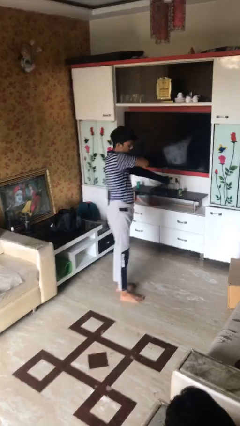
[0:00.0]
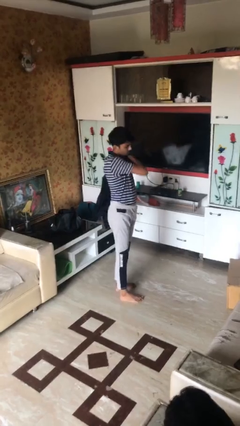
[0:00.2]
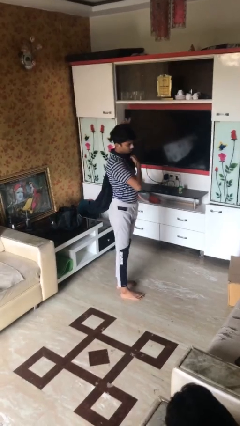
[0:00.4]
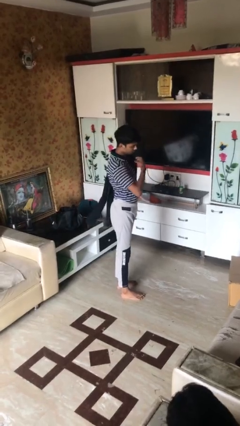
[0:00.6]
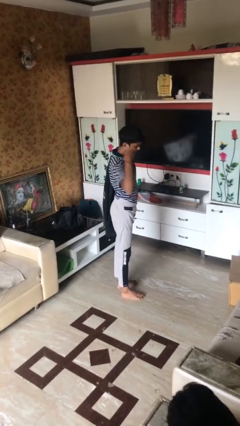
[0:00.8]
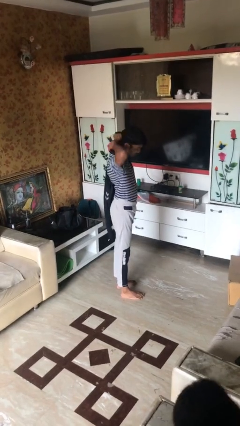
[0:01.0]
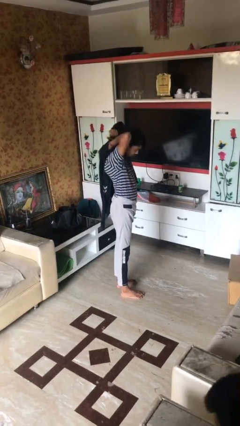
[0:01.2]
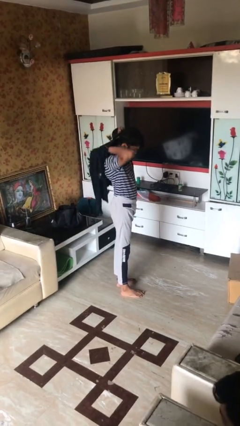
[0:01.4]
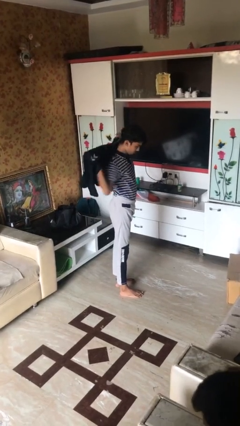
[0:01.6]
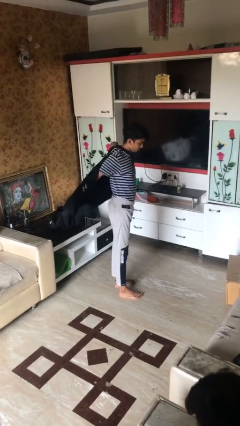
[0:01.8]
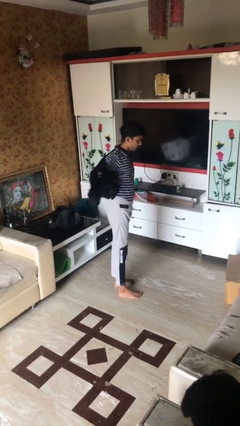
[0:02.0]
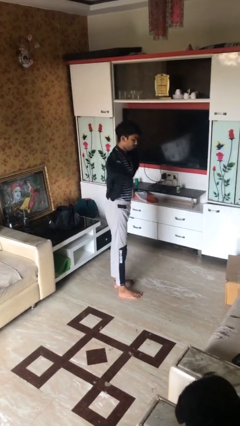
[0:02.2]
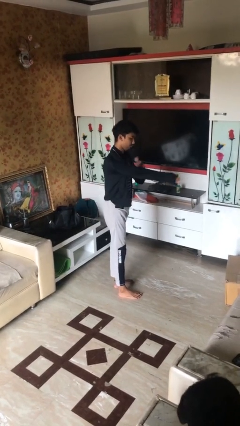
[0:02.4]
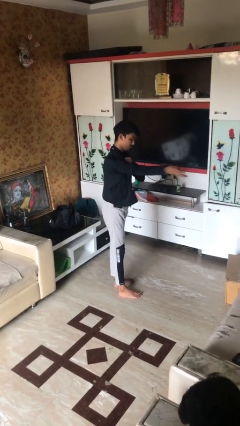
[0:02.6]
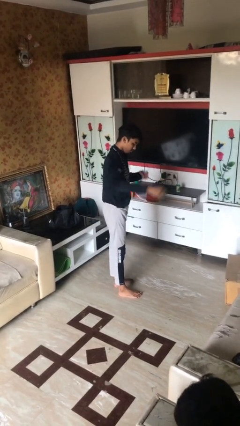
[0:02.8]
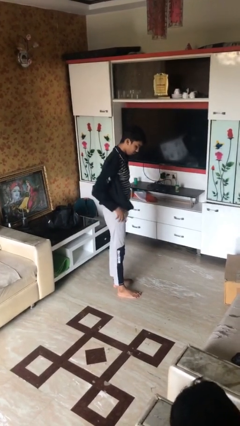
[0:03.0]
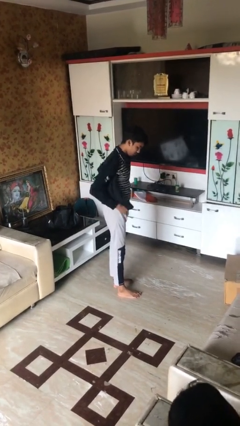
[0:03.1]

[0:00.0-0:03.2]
person puts on jacket

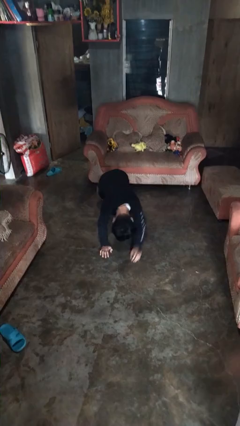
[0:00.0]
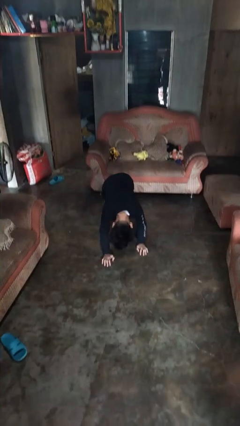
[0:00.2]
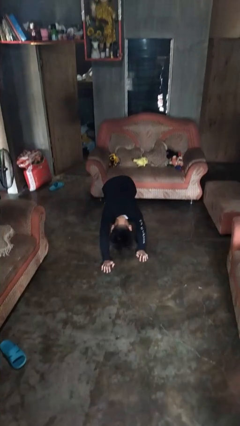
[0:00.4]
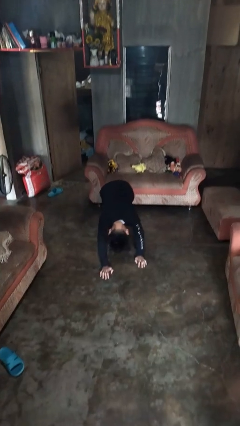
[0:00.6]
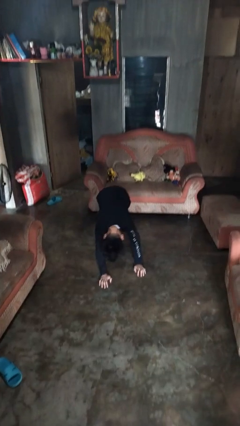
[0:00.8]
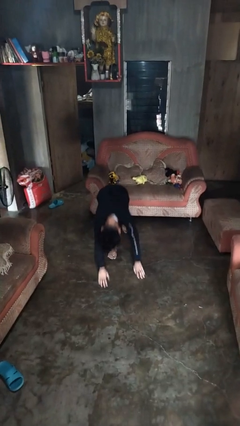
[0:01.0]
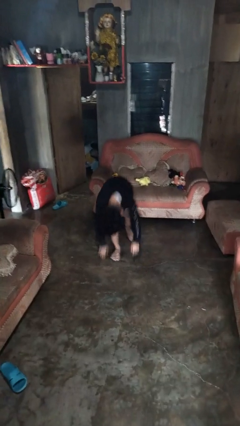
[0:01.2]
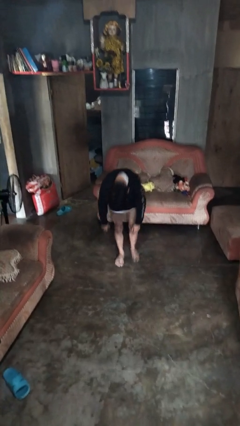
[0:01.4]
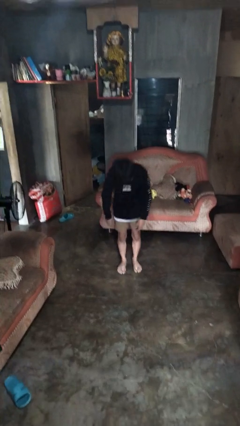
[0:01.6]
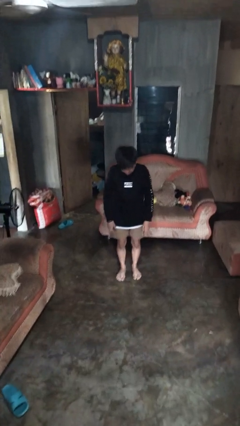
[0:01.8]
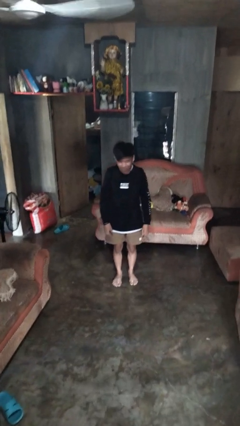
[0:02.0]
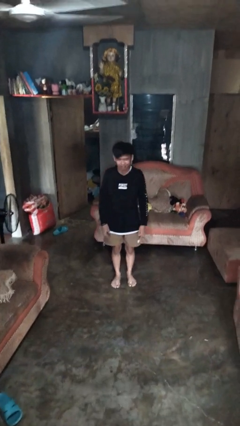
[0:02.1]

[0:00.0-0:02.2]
person stands up from floor

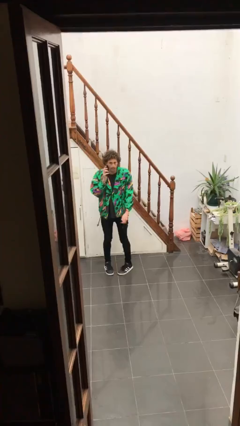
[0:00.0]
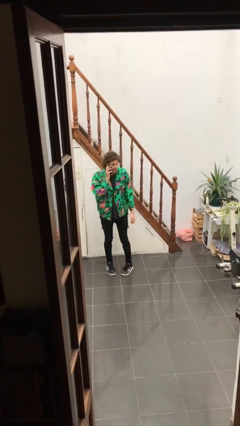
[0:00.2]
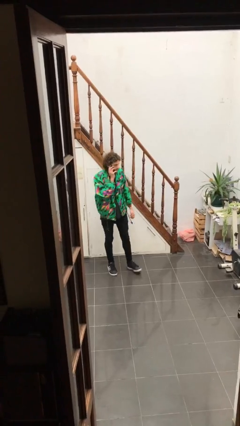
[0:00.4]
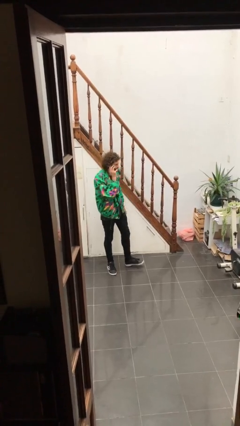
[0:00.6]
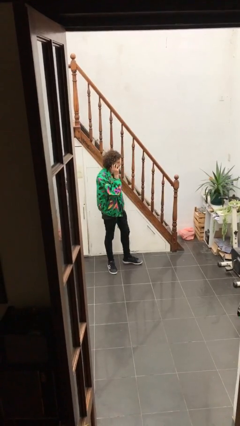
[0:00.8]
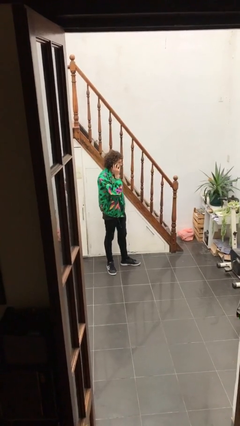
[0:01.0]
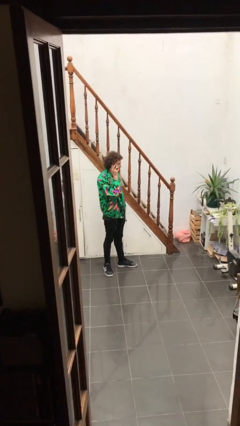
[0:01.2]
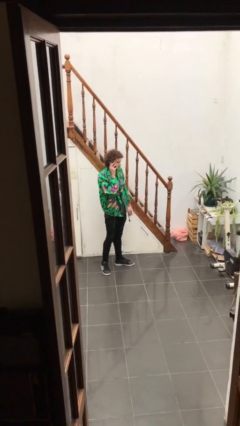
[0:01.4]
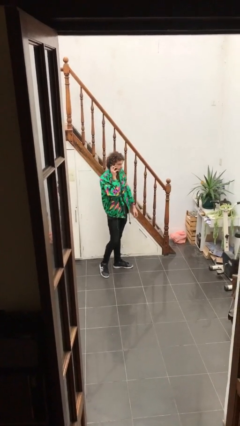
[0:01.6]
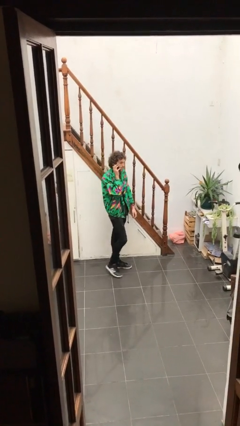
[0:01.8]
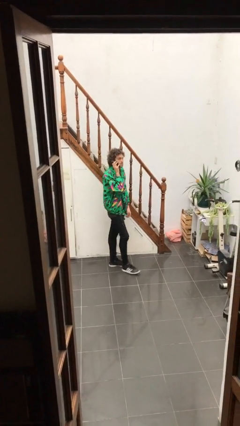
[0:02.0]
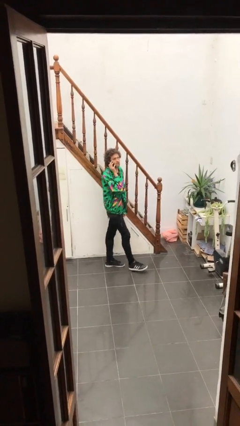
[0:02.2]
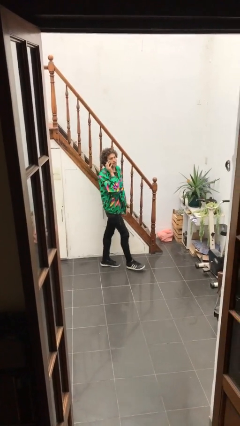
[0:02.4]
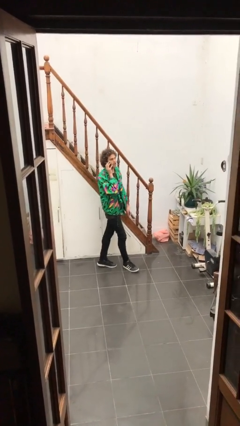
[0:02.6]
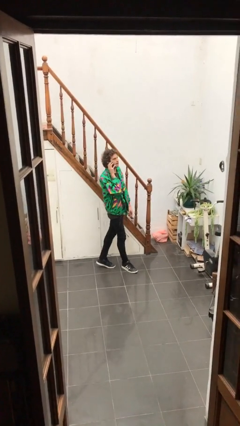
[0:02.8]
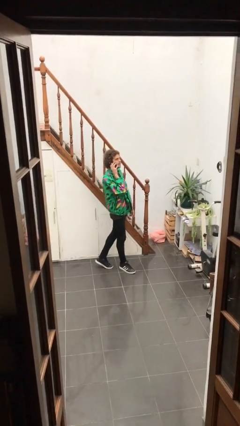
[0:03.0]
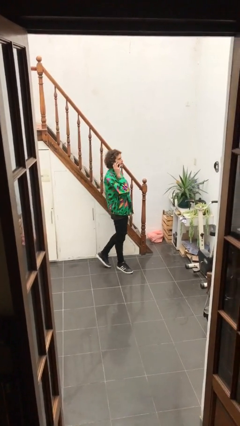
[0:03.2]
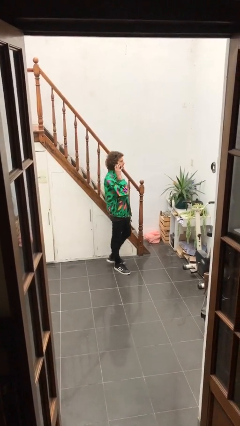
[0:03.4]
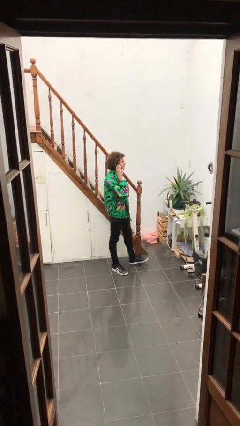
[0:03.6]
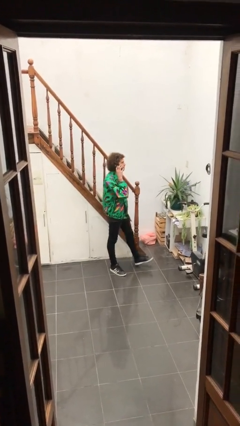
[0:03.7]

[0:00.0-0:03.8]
person talks on phone

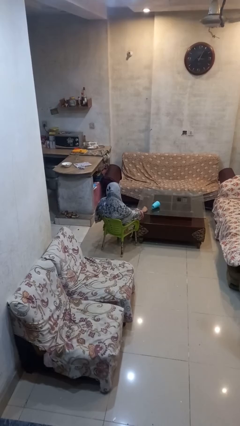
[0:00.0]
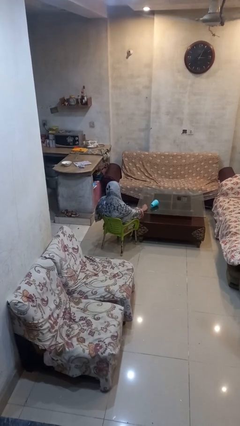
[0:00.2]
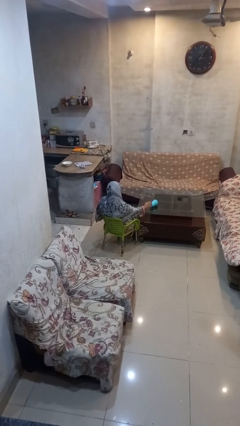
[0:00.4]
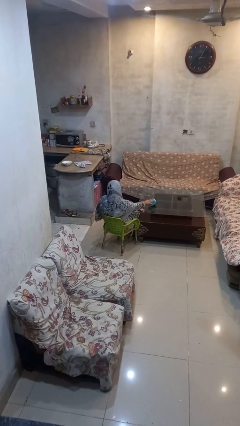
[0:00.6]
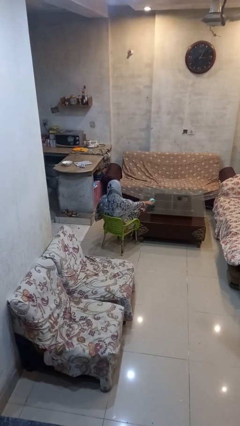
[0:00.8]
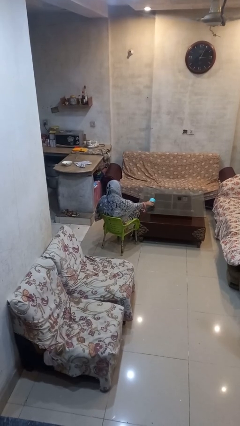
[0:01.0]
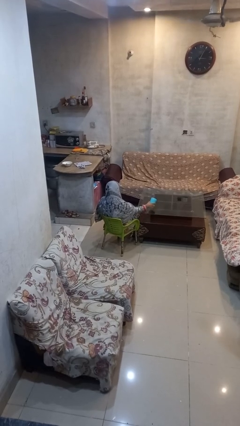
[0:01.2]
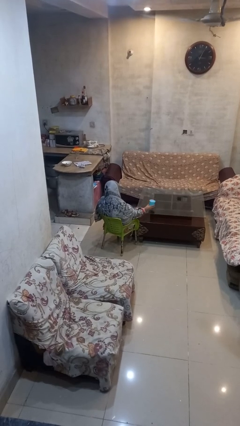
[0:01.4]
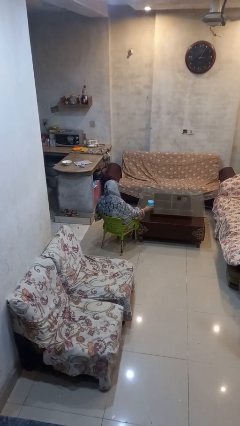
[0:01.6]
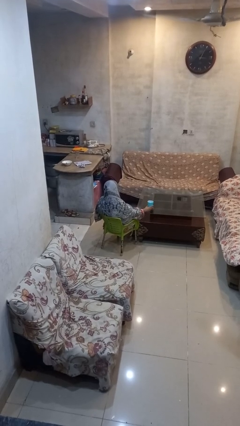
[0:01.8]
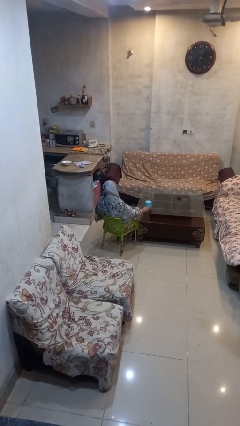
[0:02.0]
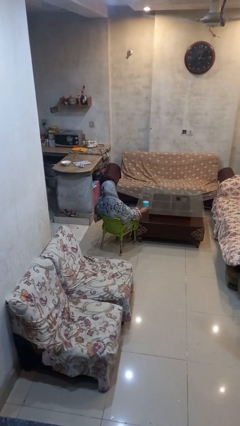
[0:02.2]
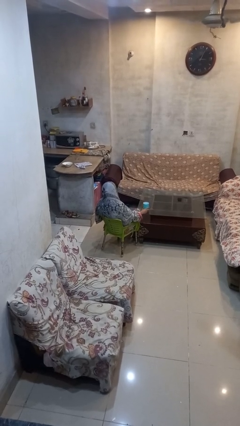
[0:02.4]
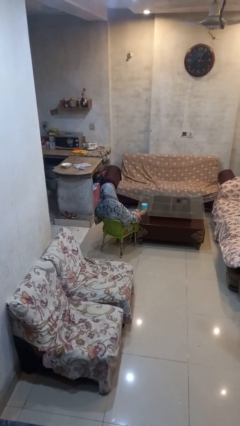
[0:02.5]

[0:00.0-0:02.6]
person sets upright glass

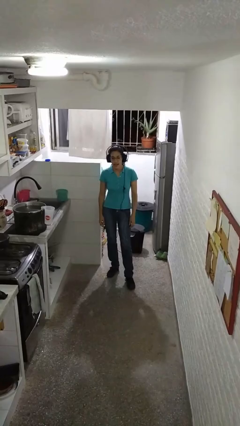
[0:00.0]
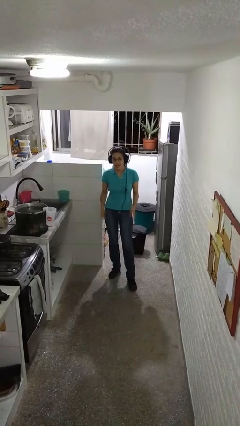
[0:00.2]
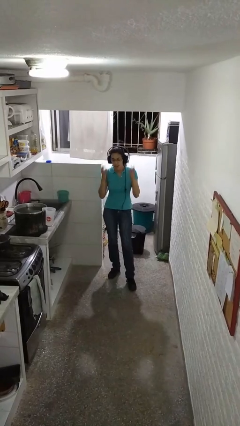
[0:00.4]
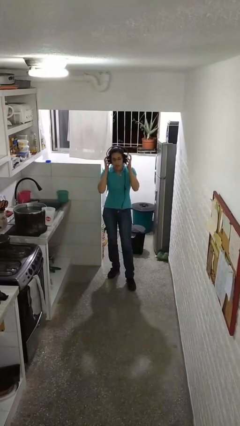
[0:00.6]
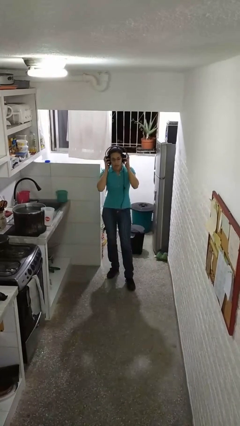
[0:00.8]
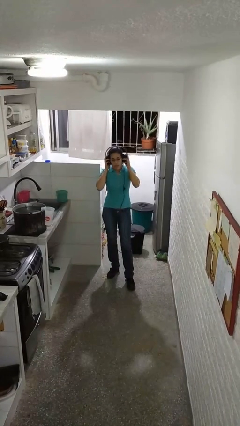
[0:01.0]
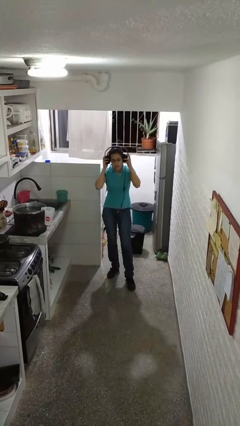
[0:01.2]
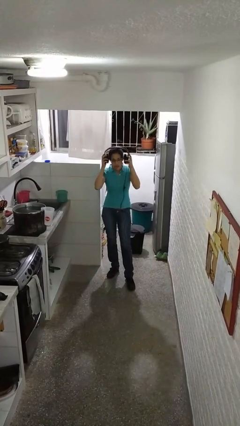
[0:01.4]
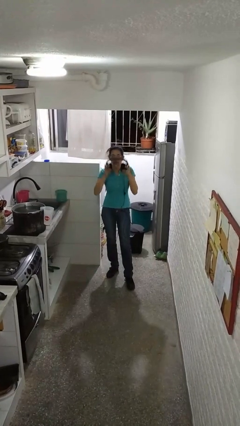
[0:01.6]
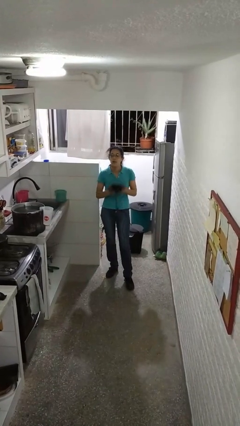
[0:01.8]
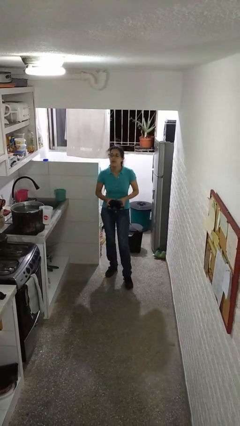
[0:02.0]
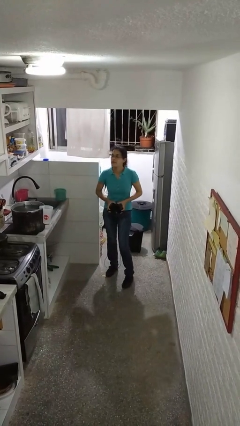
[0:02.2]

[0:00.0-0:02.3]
person takes off headphones

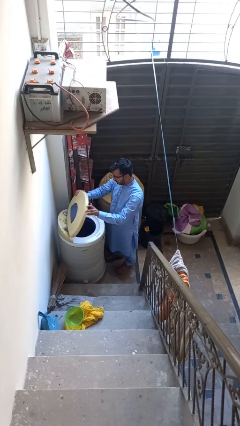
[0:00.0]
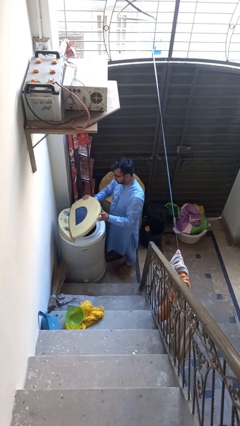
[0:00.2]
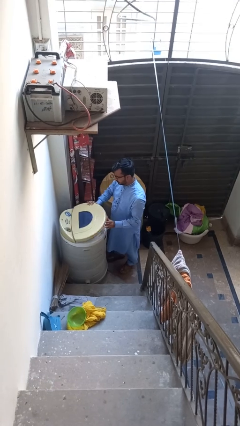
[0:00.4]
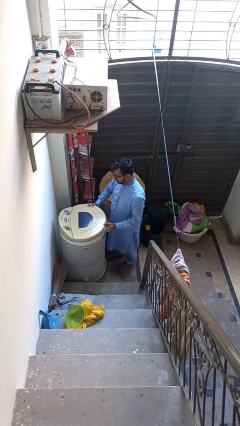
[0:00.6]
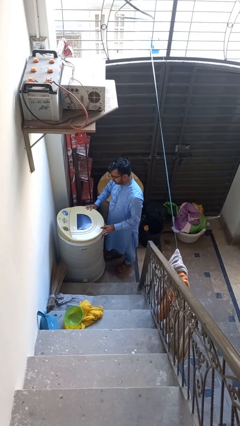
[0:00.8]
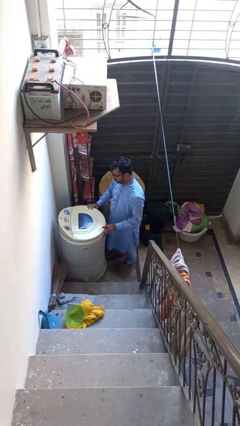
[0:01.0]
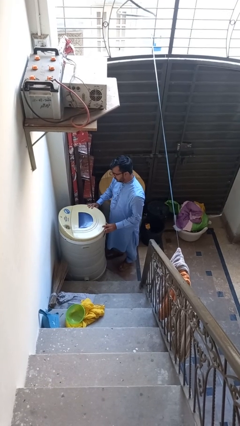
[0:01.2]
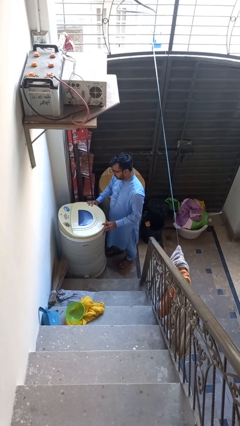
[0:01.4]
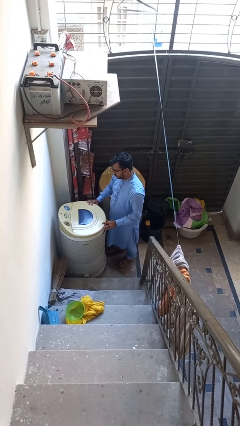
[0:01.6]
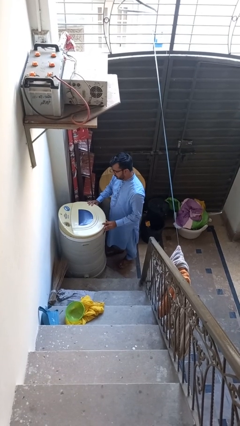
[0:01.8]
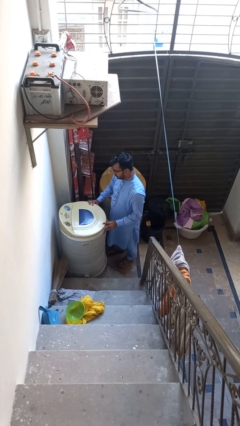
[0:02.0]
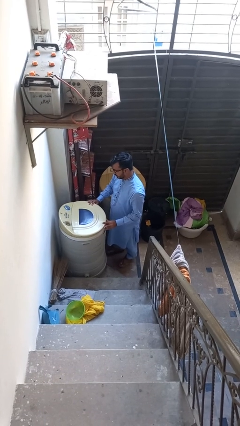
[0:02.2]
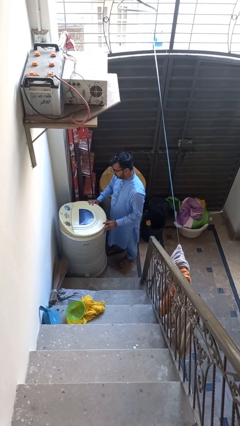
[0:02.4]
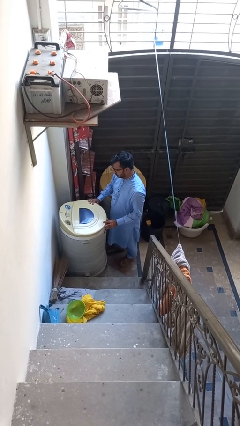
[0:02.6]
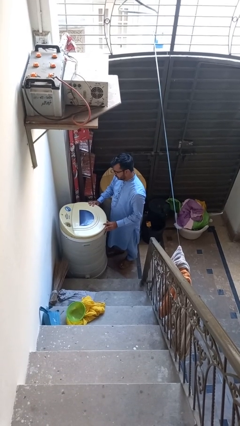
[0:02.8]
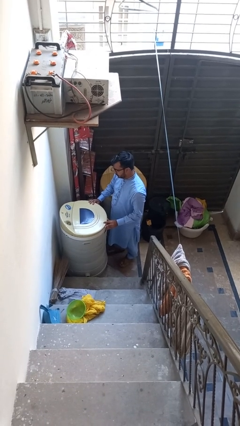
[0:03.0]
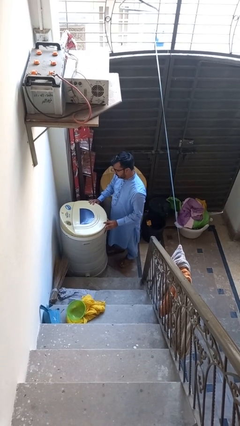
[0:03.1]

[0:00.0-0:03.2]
person closes clothes washer

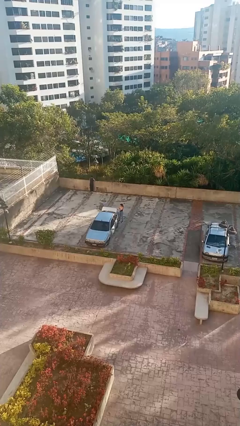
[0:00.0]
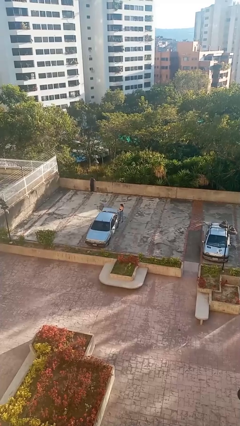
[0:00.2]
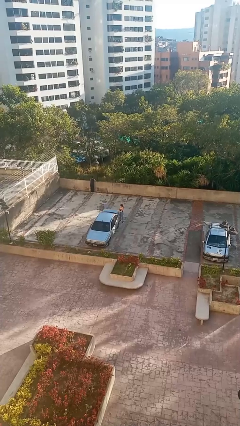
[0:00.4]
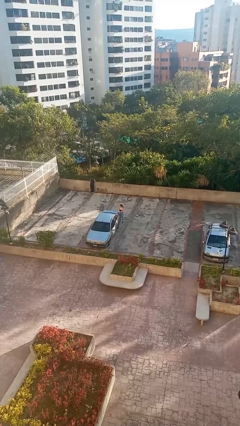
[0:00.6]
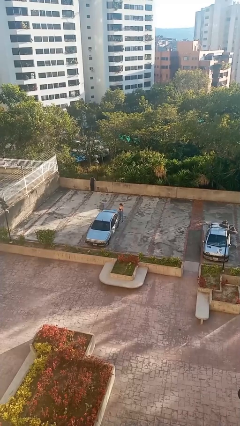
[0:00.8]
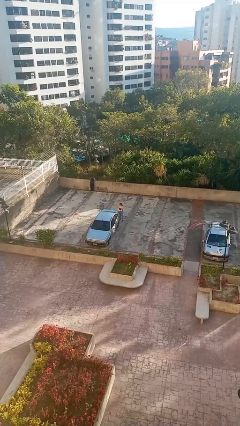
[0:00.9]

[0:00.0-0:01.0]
person closes car trunk
